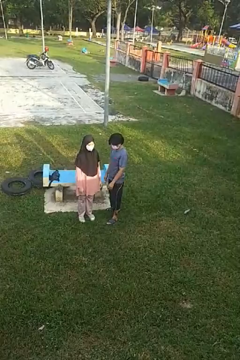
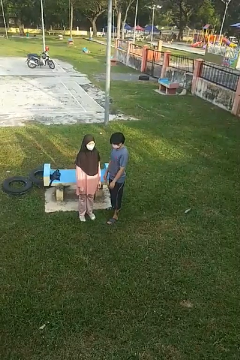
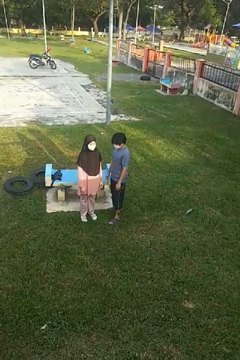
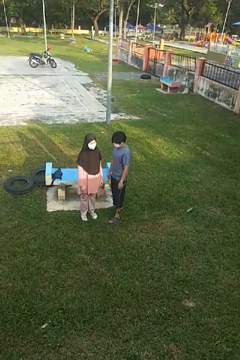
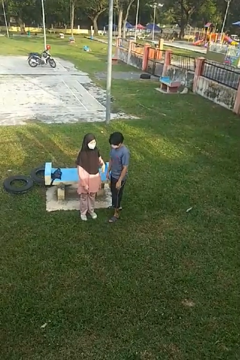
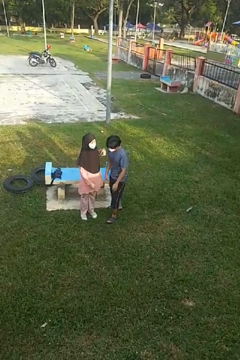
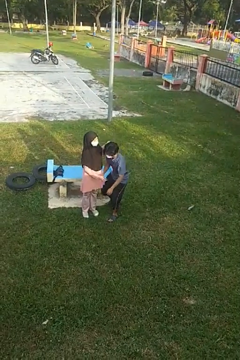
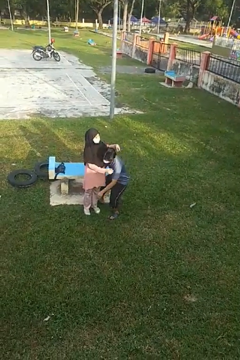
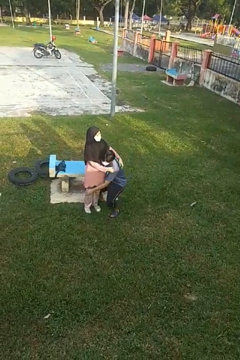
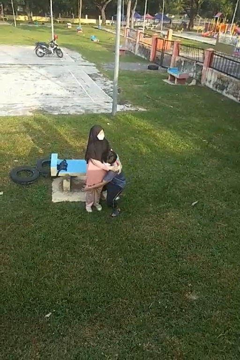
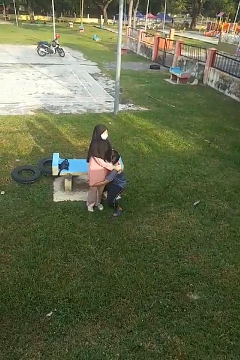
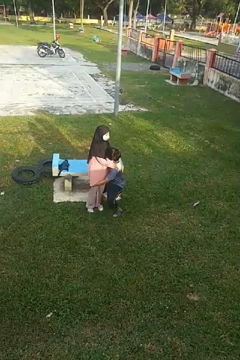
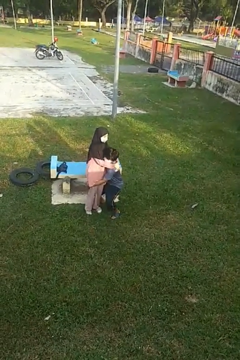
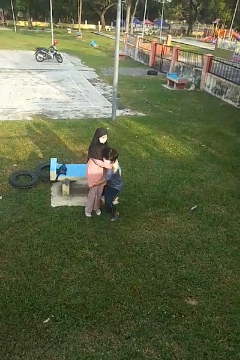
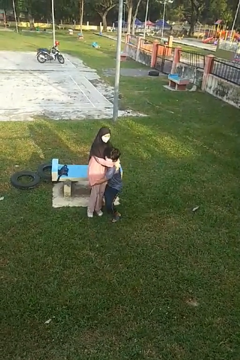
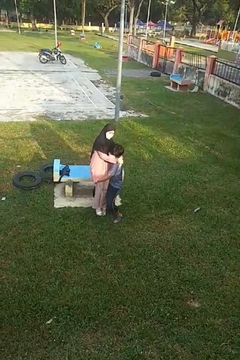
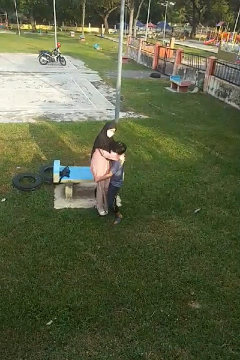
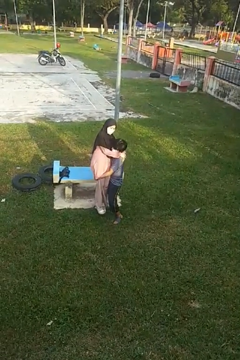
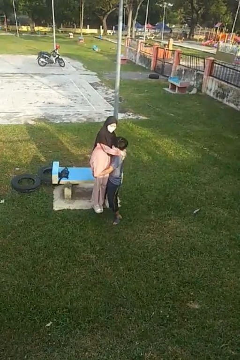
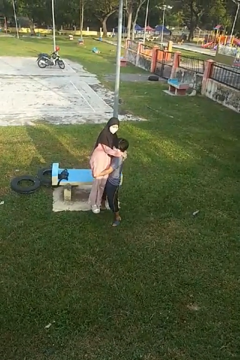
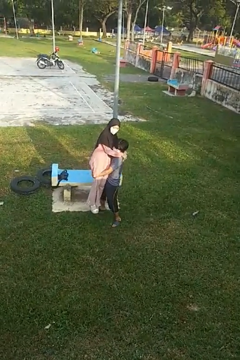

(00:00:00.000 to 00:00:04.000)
person picks up person

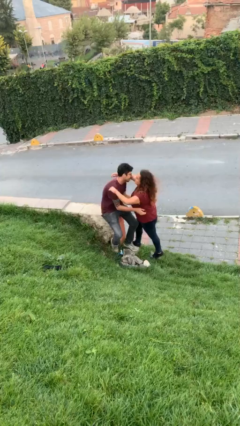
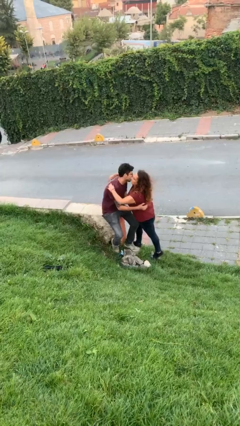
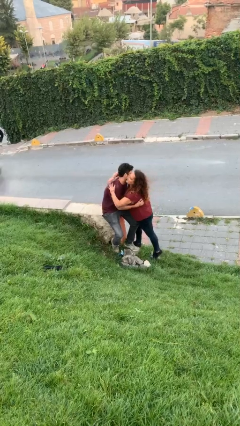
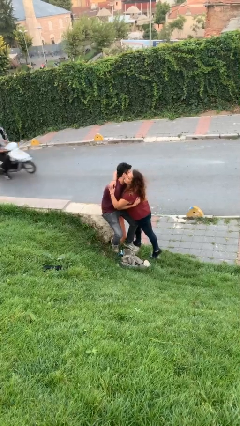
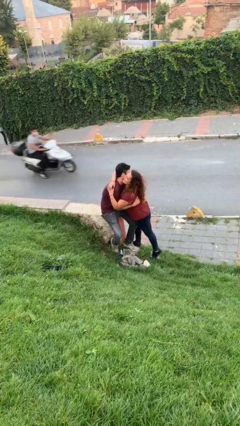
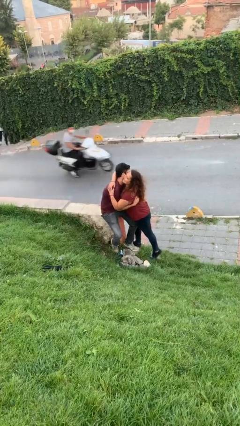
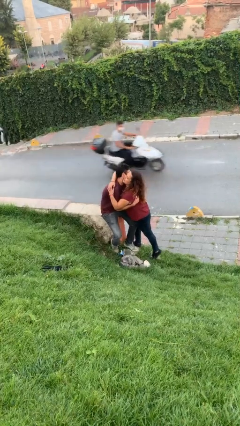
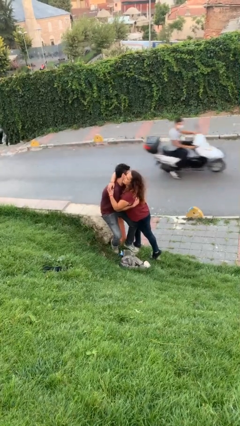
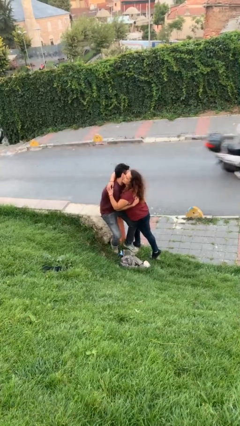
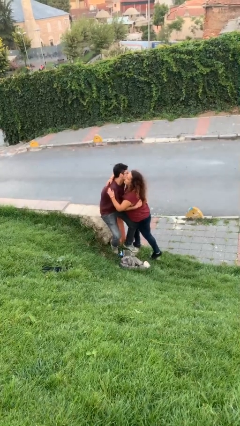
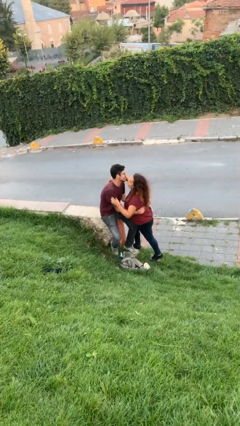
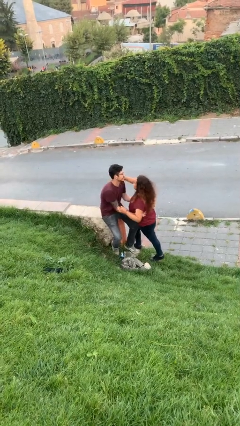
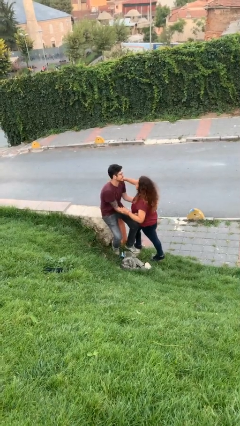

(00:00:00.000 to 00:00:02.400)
person embraces person

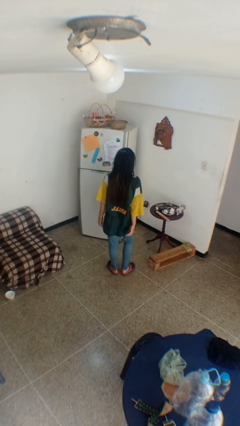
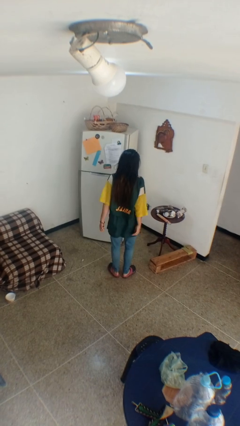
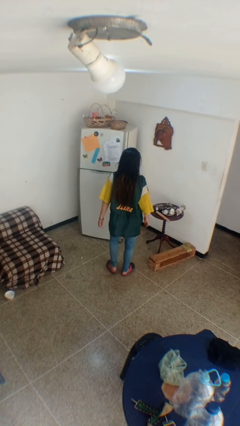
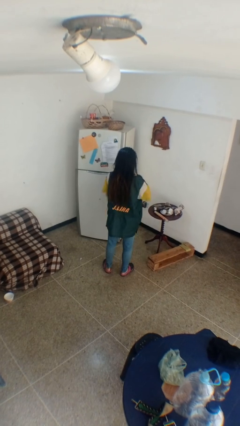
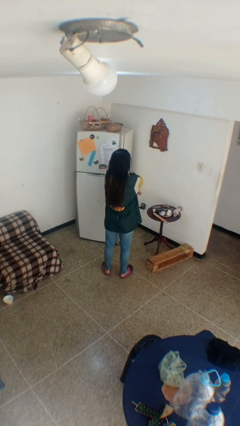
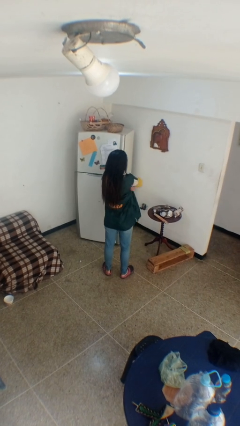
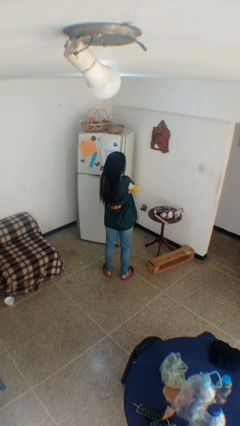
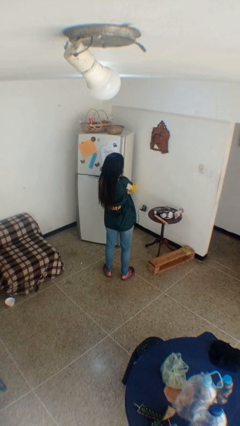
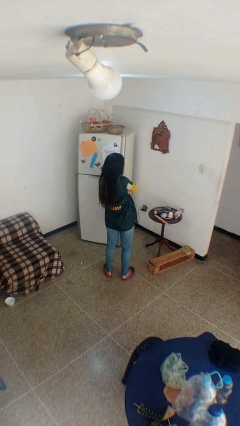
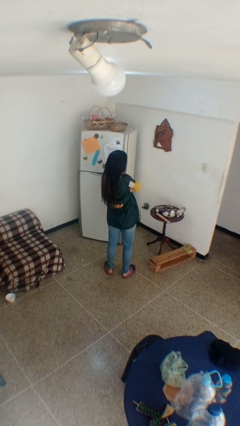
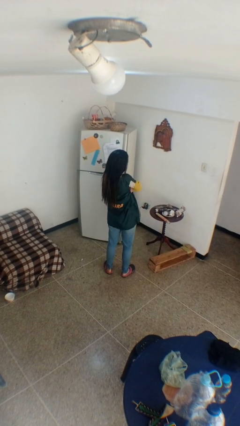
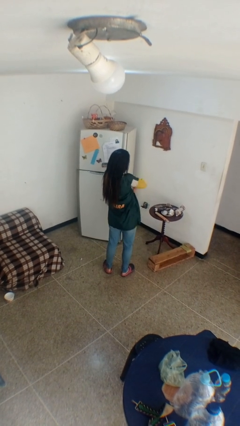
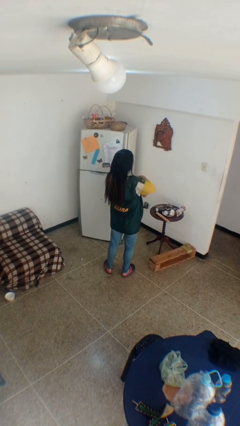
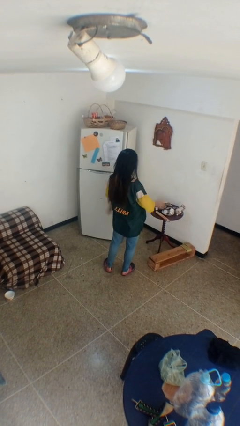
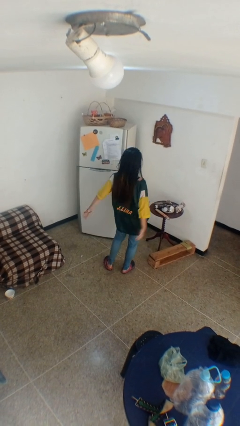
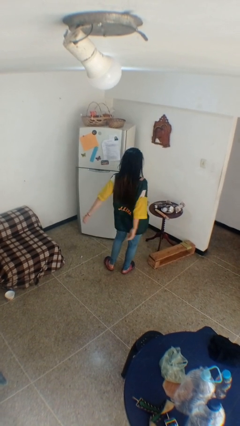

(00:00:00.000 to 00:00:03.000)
person gestures arms x

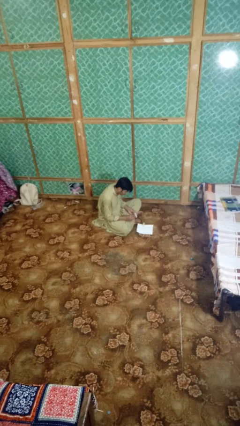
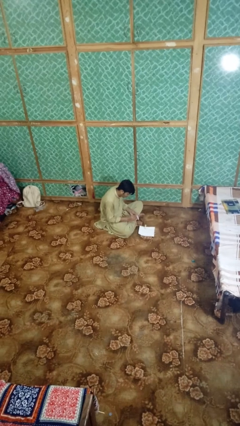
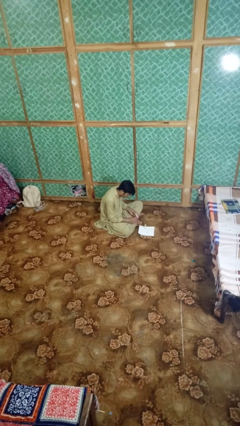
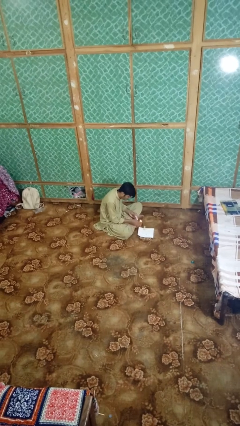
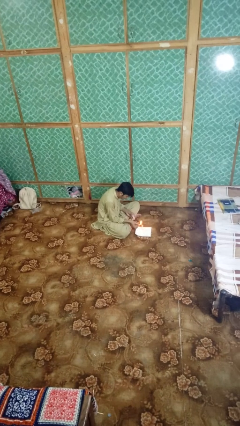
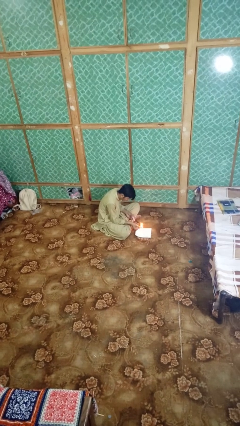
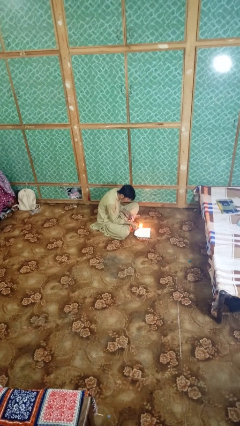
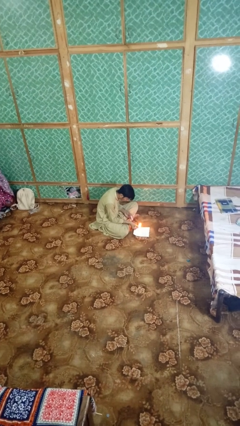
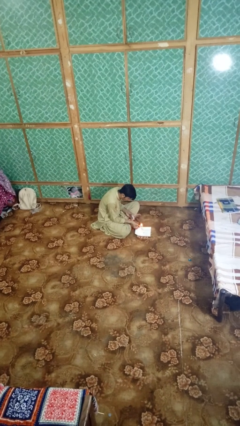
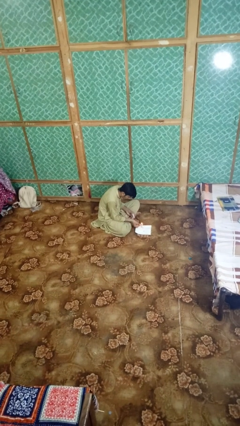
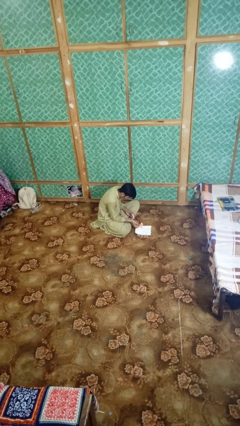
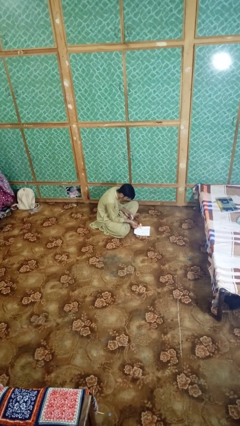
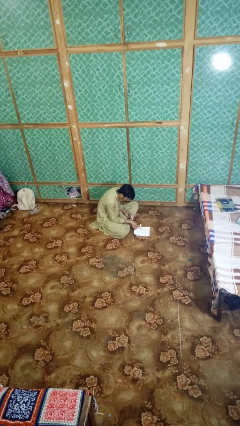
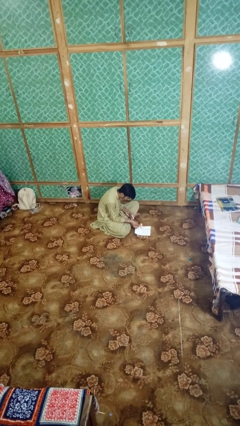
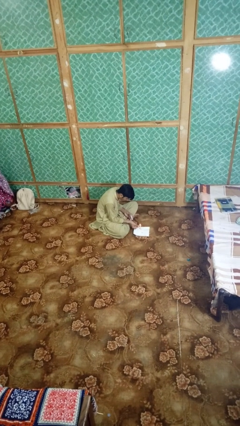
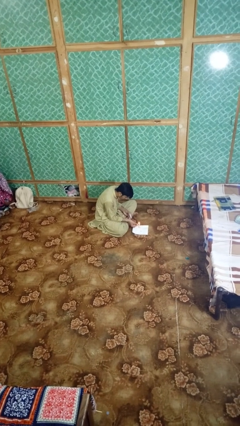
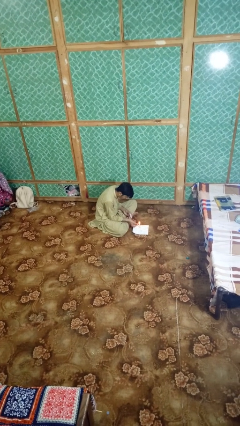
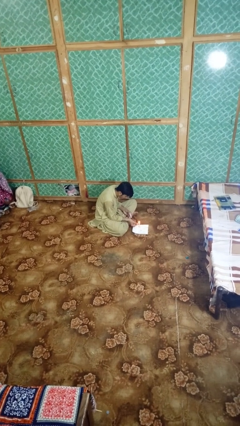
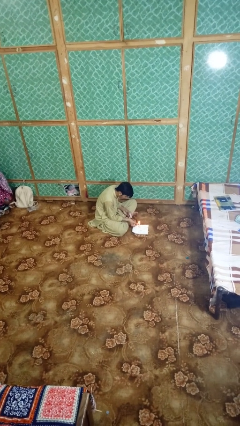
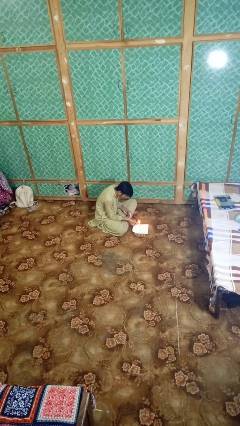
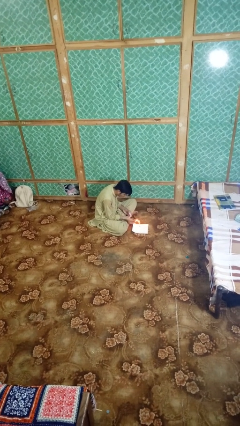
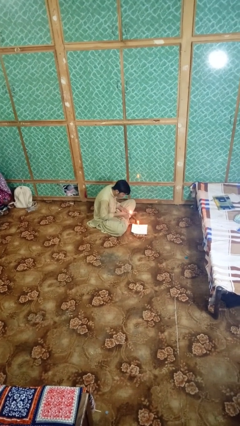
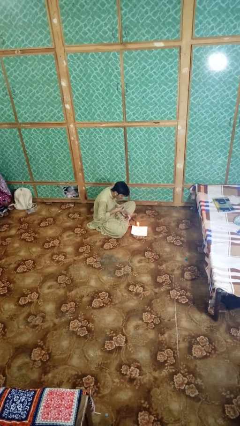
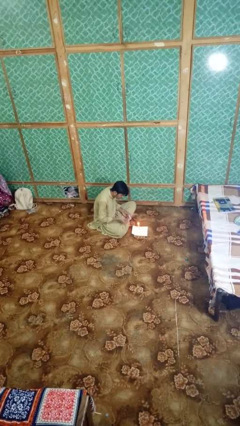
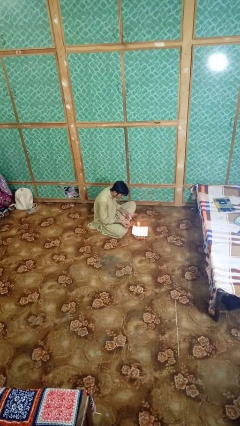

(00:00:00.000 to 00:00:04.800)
person lights candle

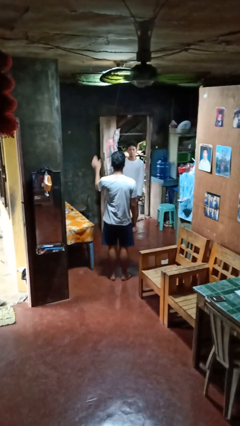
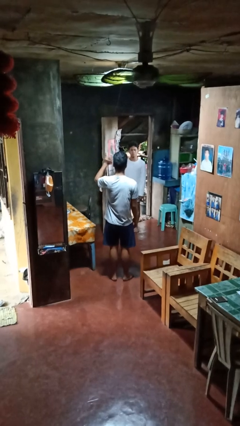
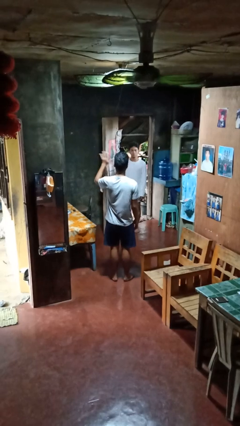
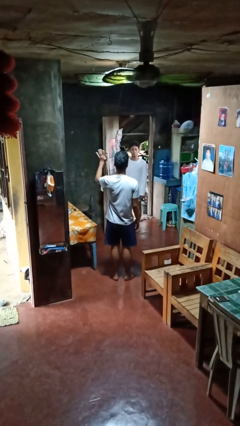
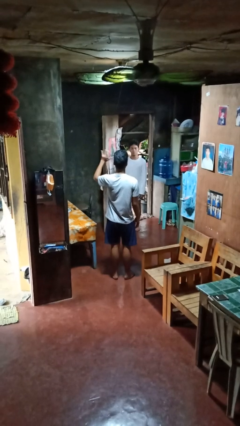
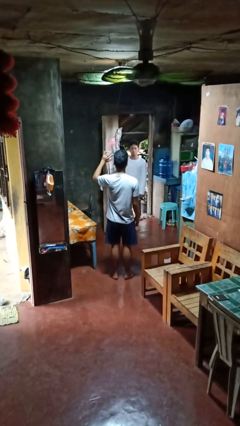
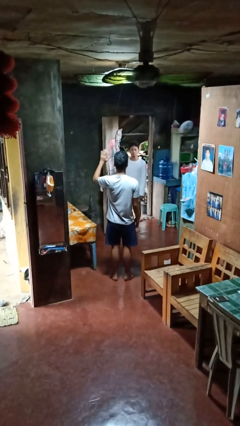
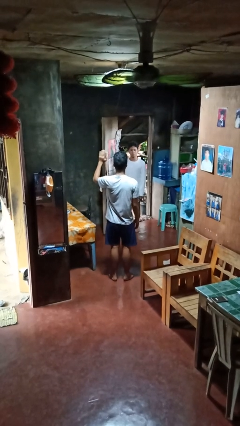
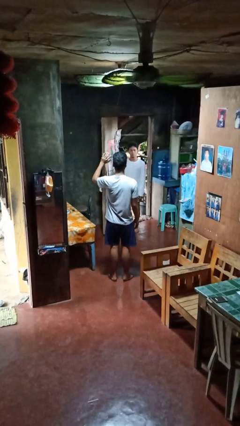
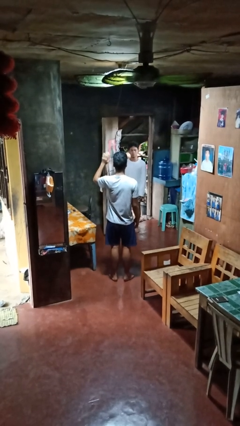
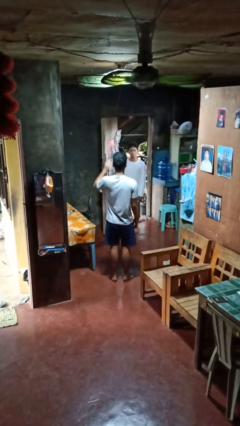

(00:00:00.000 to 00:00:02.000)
person waves at person

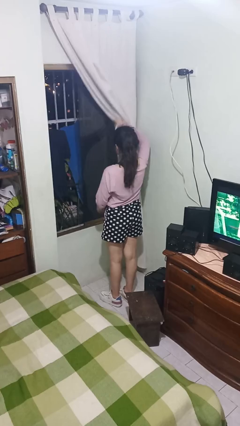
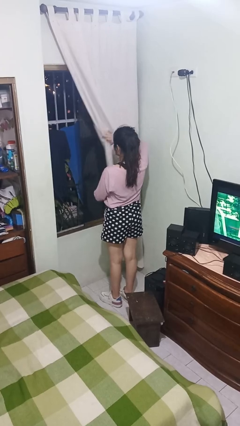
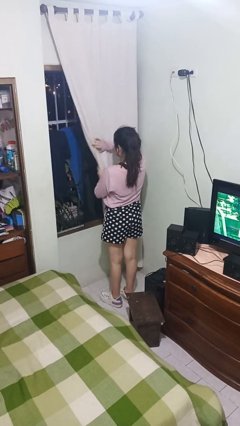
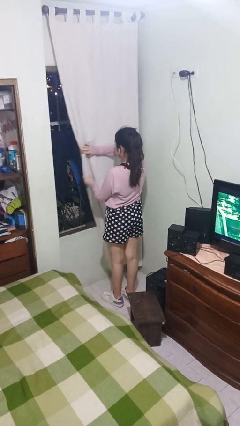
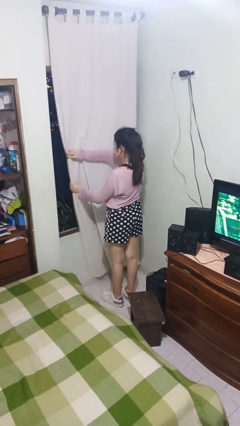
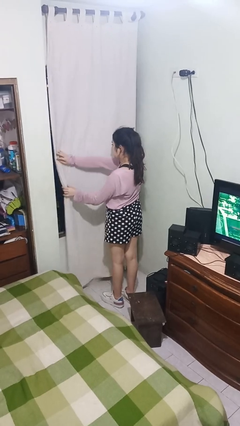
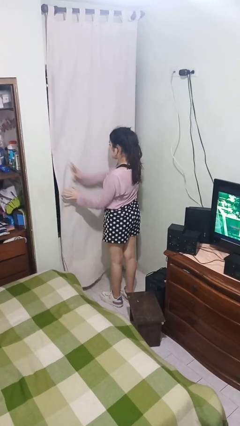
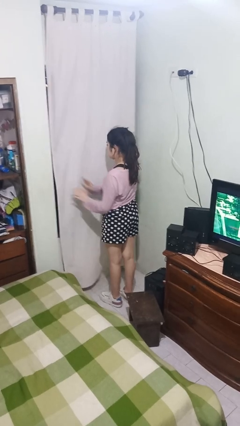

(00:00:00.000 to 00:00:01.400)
person closes curtains

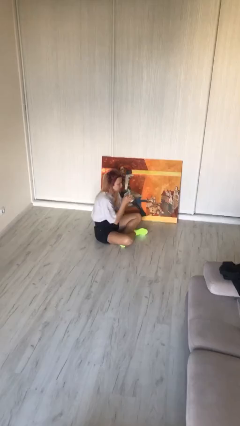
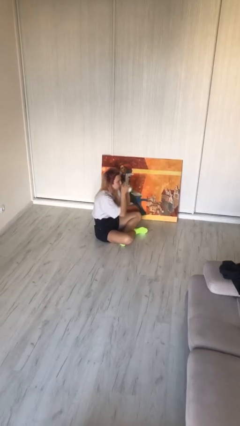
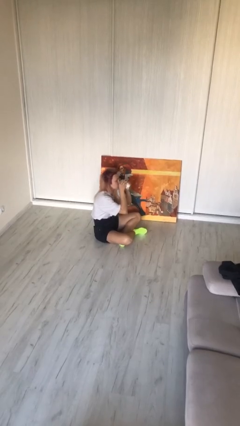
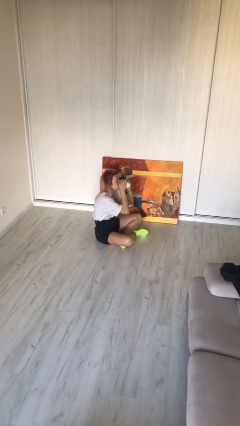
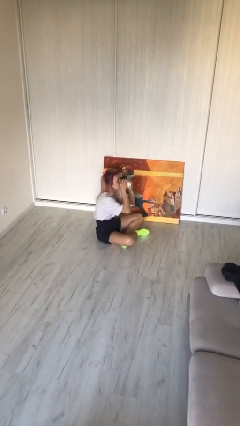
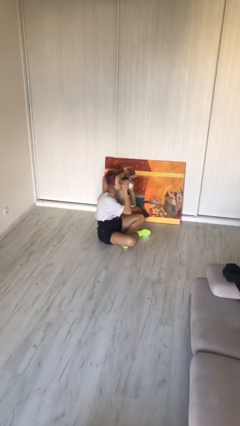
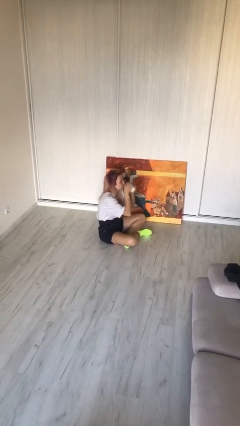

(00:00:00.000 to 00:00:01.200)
person drinks from mug
